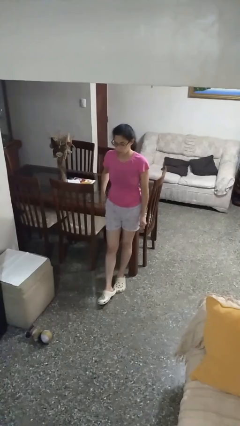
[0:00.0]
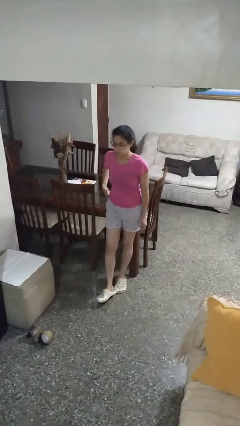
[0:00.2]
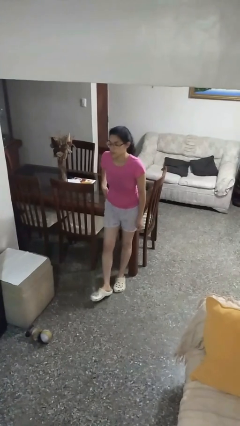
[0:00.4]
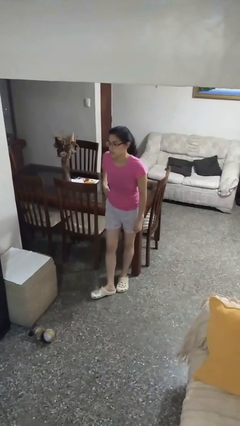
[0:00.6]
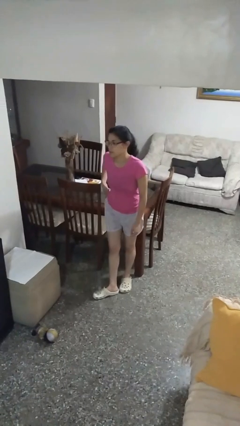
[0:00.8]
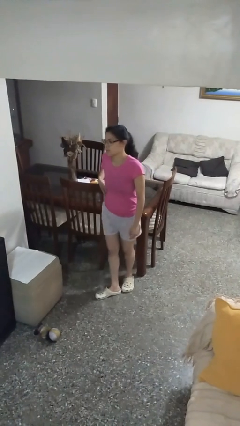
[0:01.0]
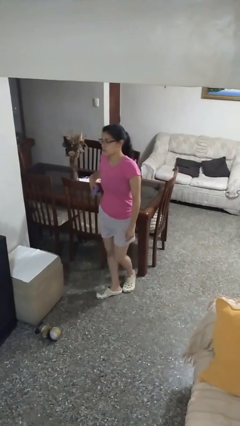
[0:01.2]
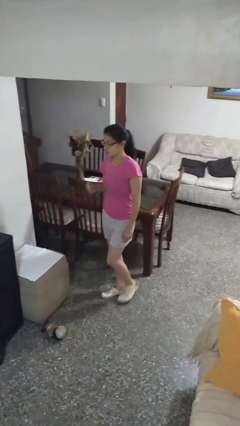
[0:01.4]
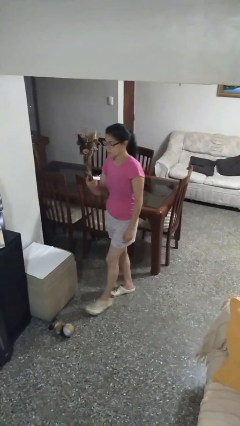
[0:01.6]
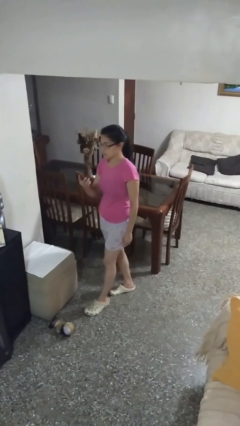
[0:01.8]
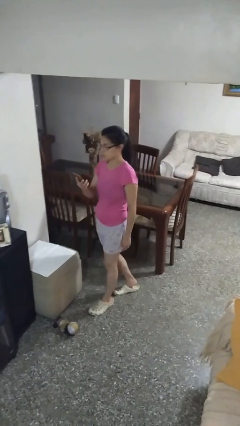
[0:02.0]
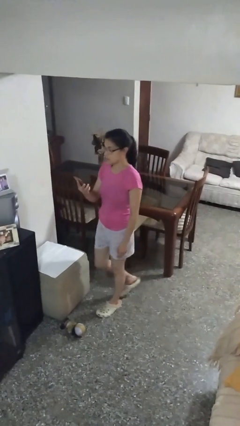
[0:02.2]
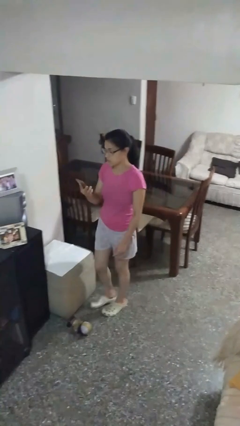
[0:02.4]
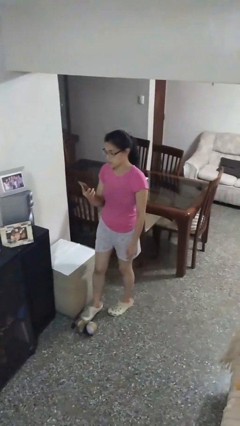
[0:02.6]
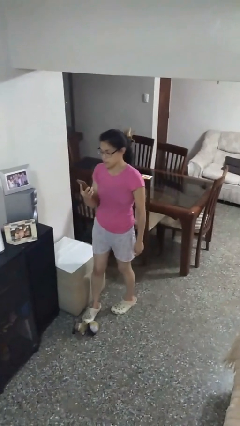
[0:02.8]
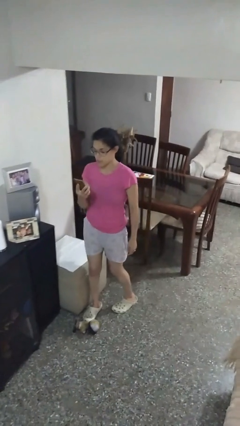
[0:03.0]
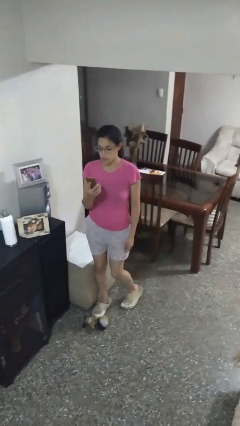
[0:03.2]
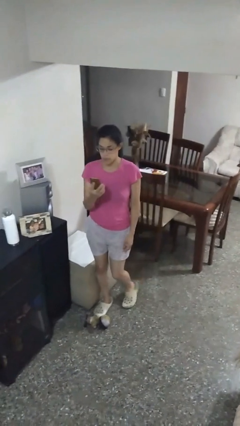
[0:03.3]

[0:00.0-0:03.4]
person takes phone from pocket

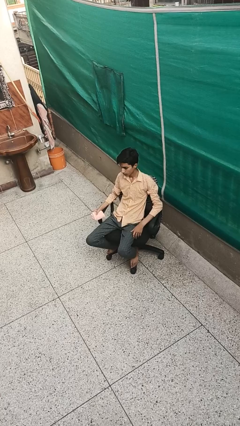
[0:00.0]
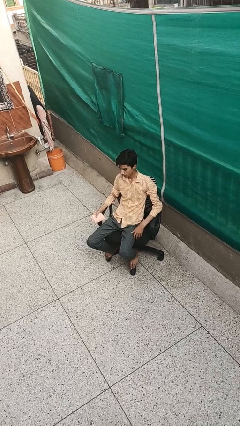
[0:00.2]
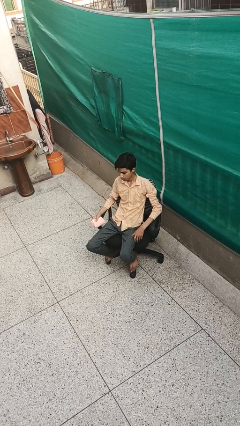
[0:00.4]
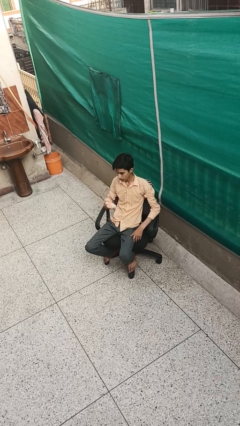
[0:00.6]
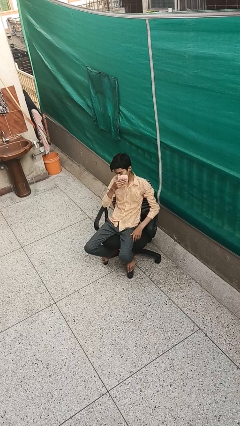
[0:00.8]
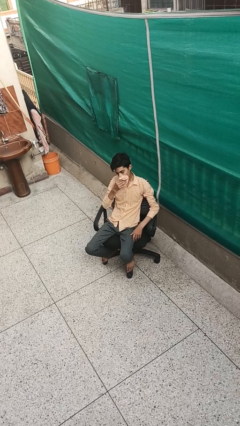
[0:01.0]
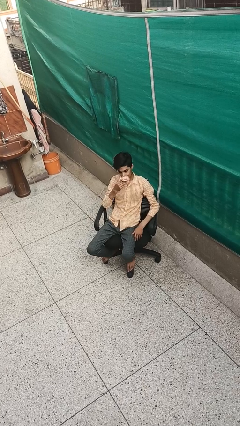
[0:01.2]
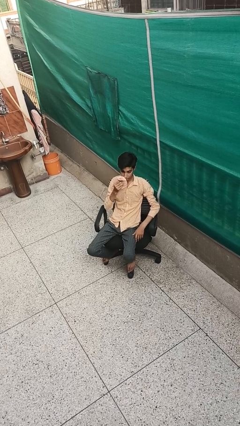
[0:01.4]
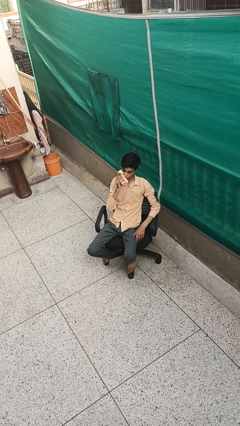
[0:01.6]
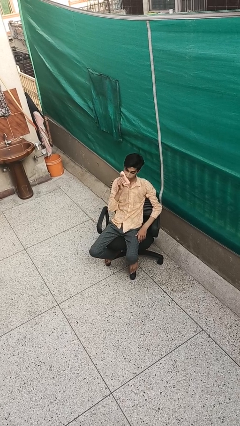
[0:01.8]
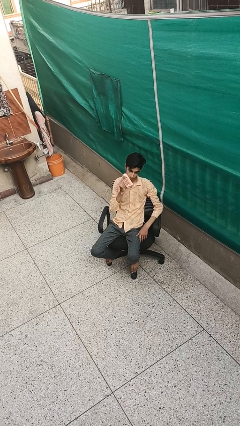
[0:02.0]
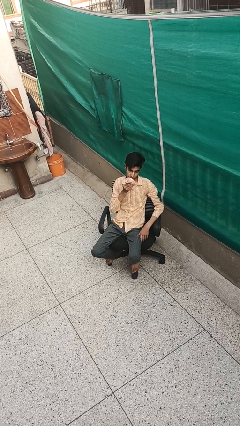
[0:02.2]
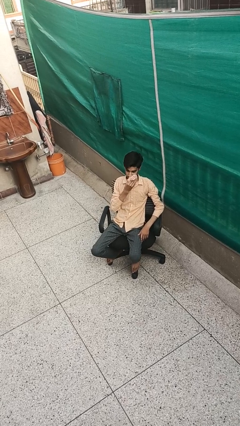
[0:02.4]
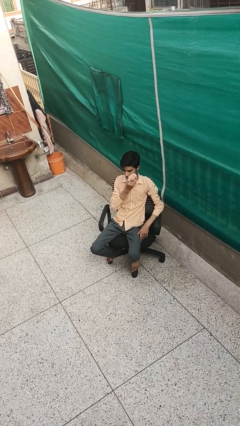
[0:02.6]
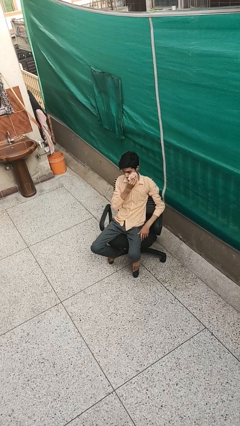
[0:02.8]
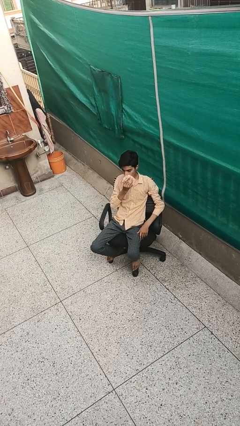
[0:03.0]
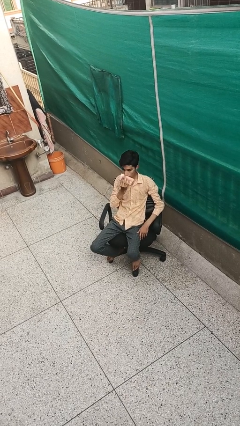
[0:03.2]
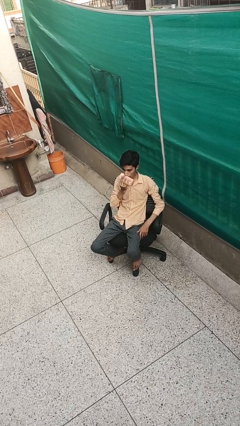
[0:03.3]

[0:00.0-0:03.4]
person wipes mouth with napkin

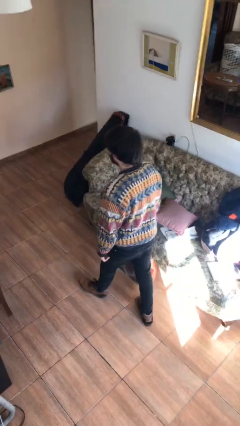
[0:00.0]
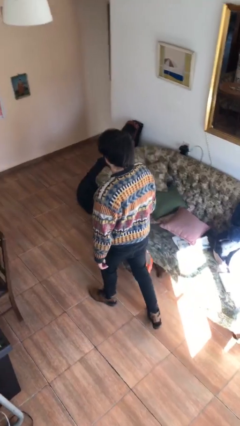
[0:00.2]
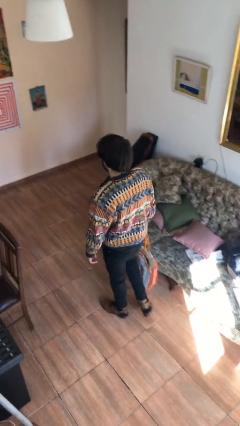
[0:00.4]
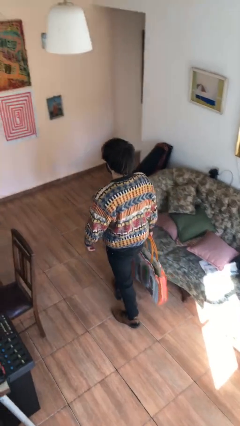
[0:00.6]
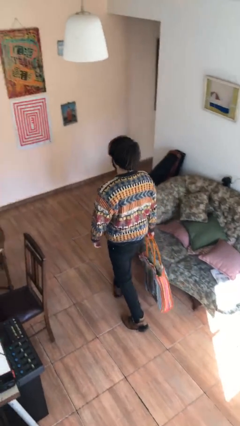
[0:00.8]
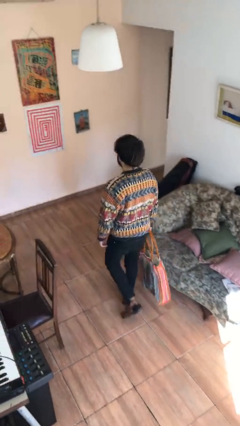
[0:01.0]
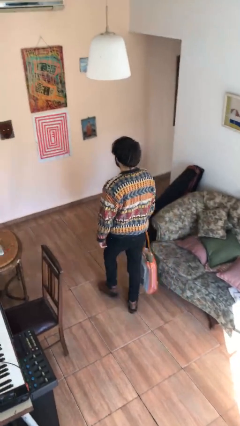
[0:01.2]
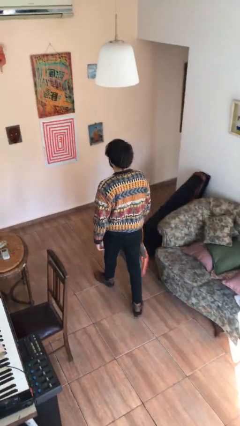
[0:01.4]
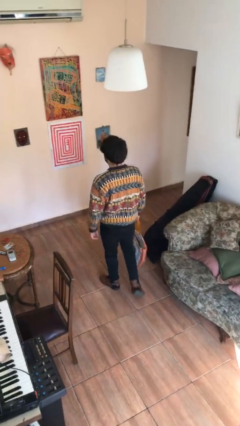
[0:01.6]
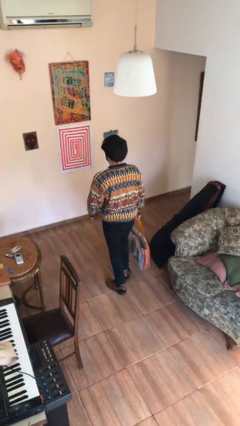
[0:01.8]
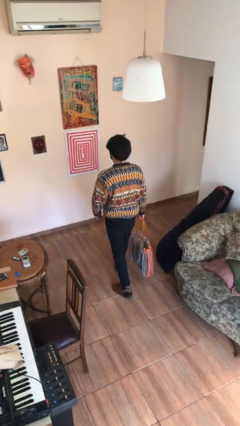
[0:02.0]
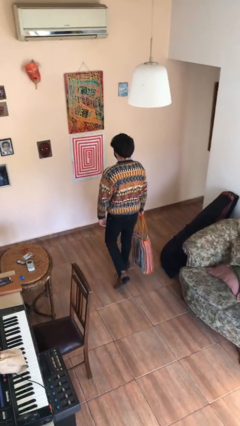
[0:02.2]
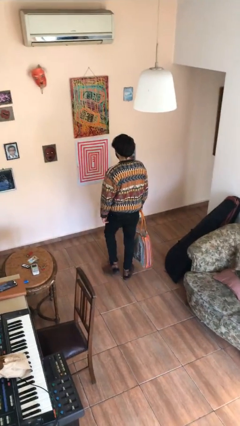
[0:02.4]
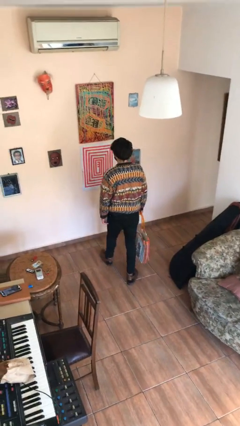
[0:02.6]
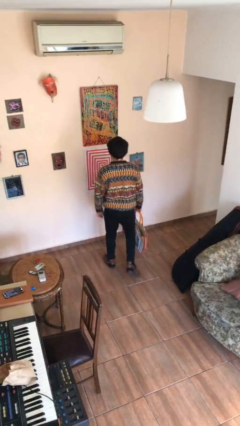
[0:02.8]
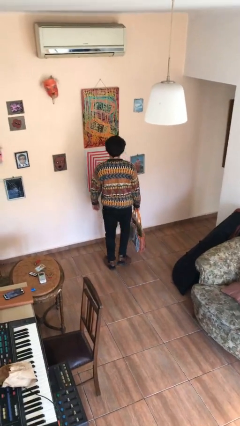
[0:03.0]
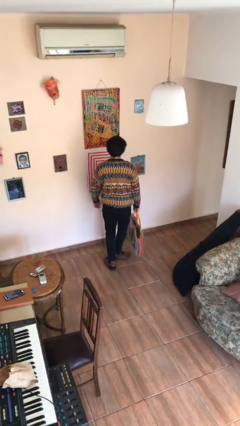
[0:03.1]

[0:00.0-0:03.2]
person carries groceries

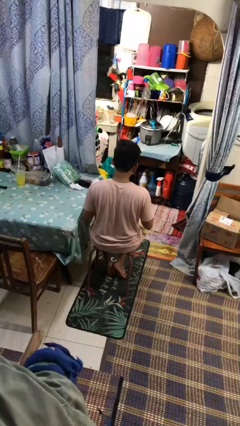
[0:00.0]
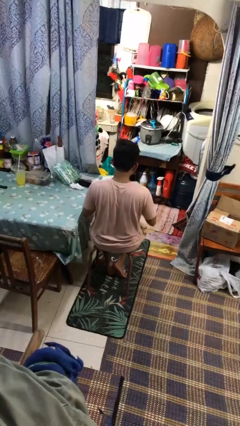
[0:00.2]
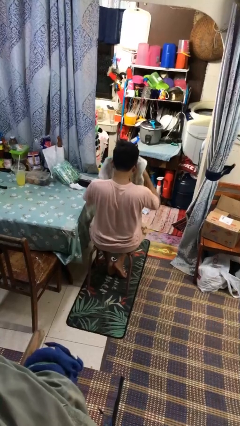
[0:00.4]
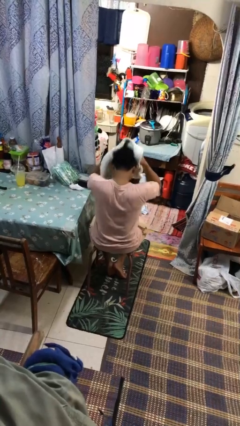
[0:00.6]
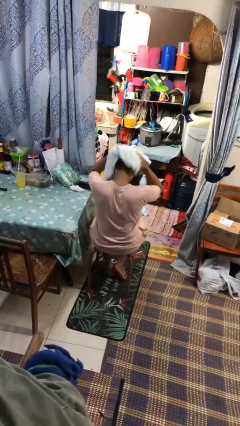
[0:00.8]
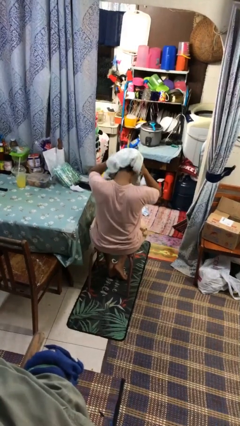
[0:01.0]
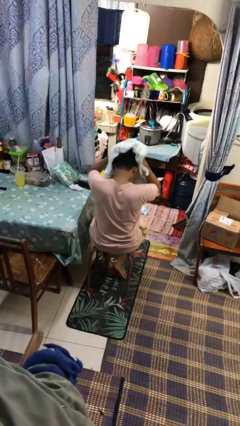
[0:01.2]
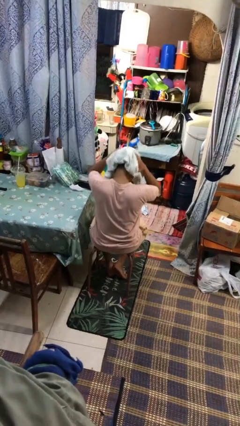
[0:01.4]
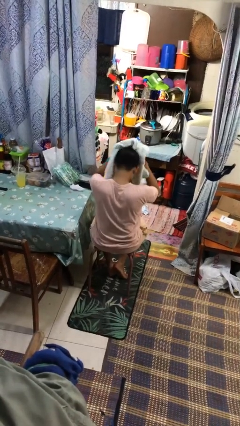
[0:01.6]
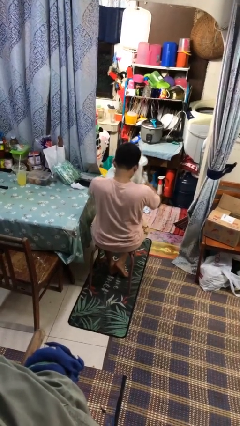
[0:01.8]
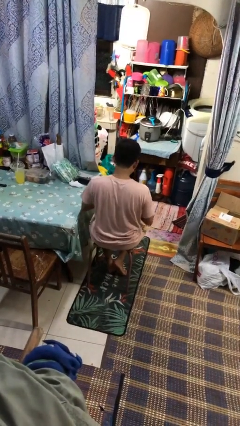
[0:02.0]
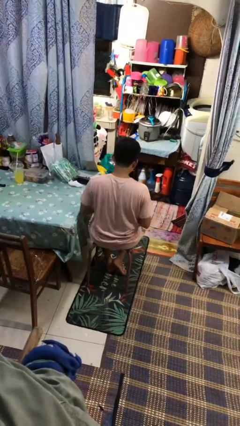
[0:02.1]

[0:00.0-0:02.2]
person dries hair with towel

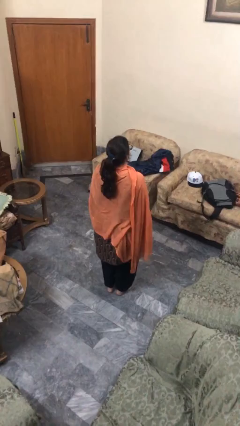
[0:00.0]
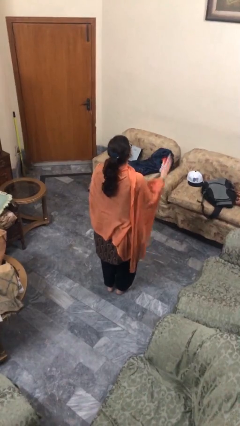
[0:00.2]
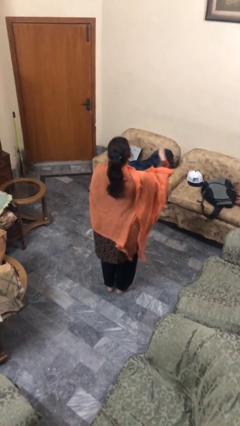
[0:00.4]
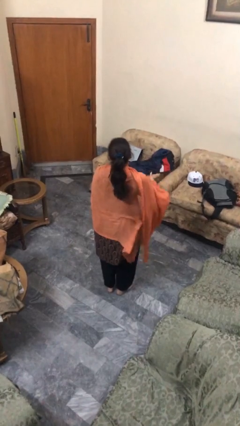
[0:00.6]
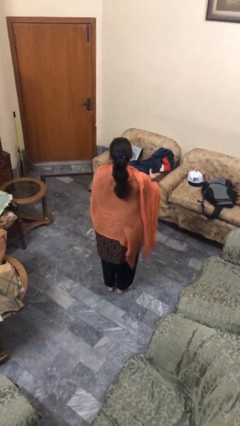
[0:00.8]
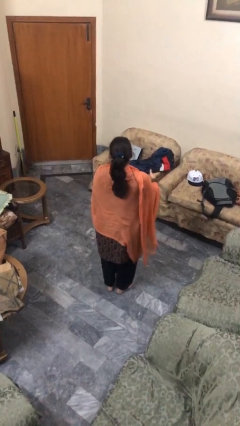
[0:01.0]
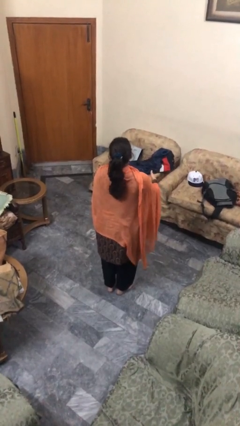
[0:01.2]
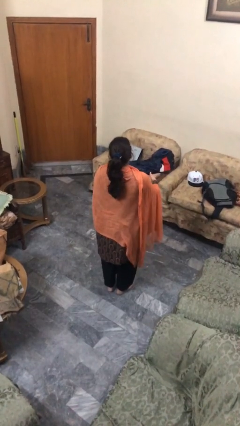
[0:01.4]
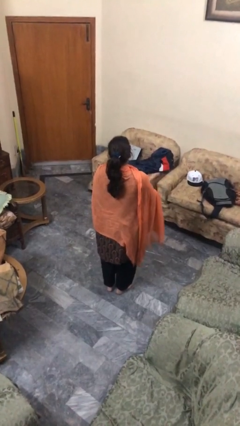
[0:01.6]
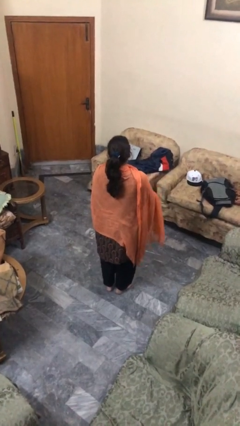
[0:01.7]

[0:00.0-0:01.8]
person karate chop

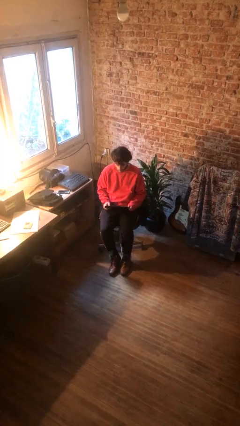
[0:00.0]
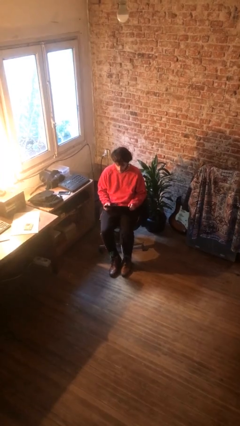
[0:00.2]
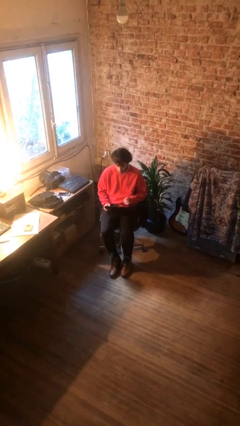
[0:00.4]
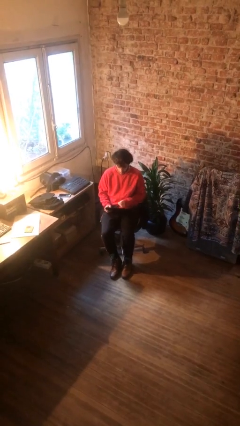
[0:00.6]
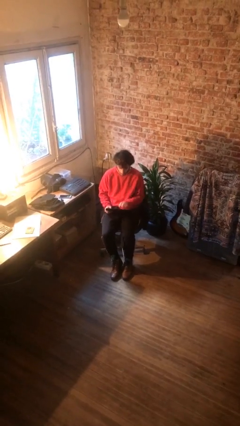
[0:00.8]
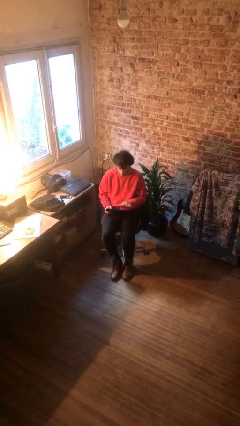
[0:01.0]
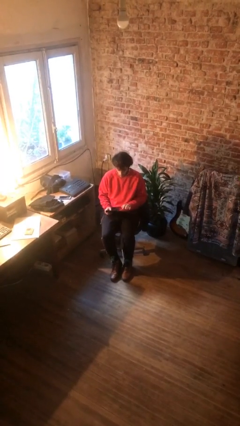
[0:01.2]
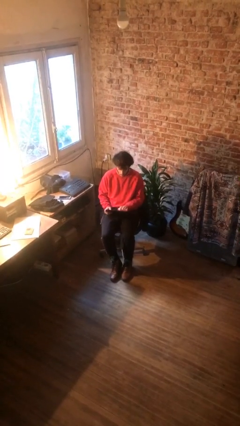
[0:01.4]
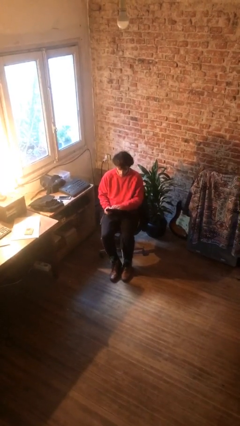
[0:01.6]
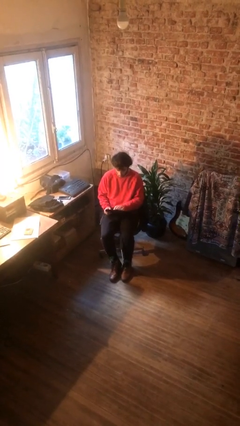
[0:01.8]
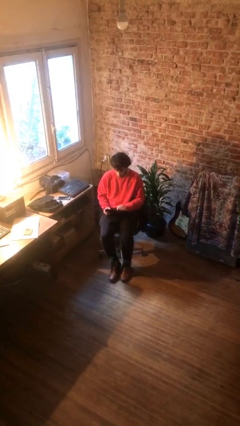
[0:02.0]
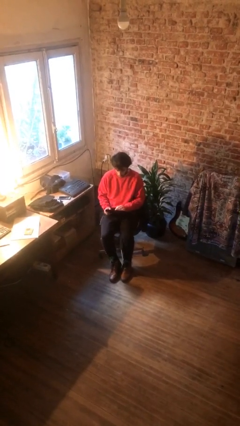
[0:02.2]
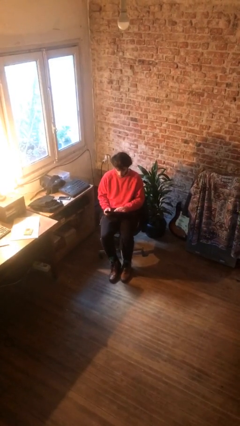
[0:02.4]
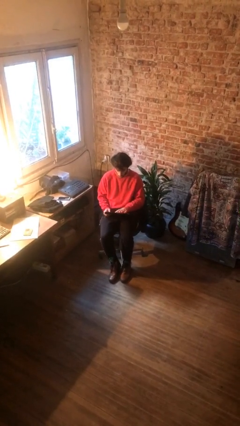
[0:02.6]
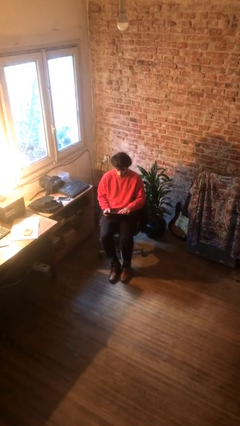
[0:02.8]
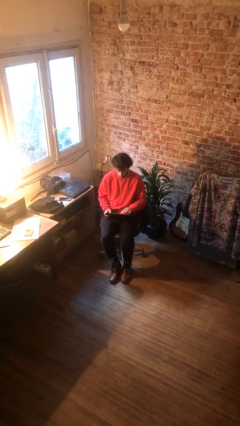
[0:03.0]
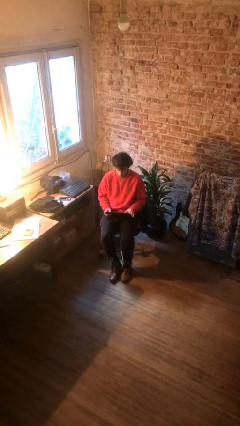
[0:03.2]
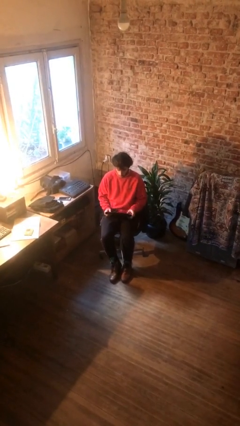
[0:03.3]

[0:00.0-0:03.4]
person interacts with tablet
